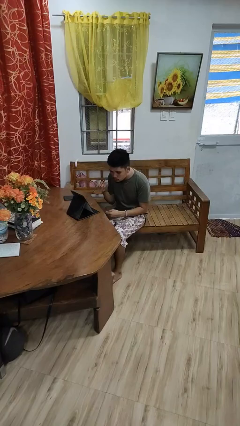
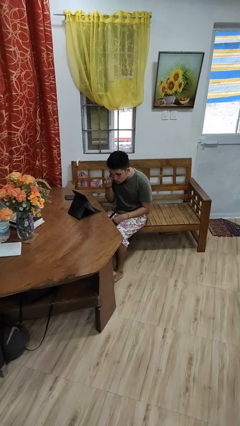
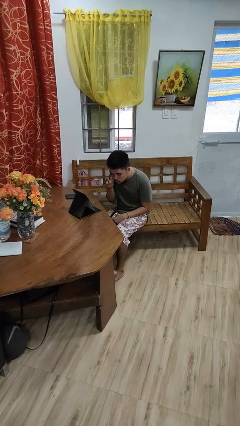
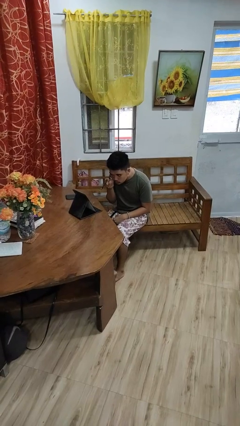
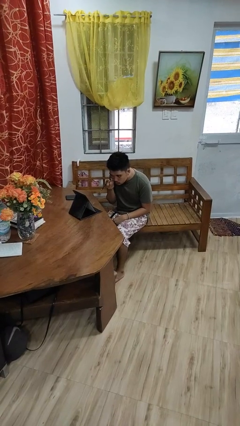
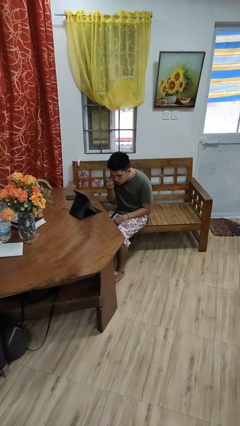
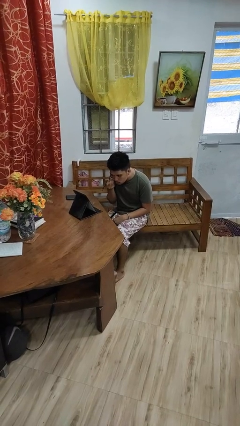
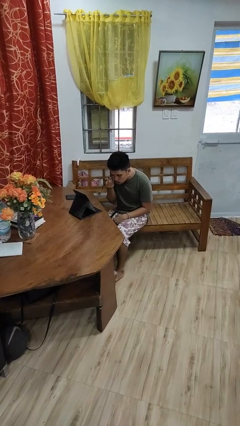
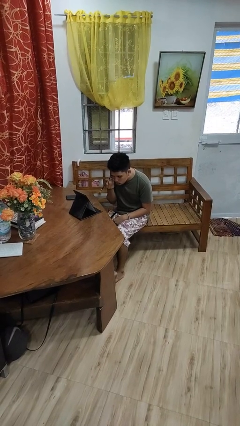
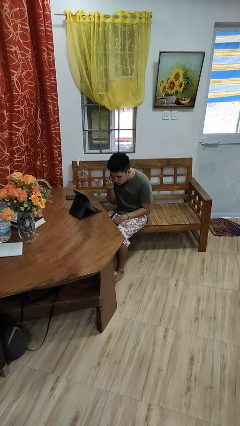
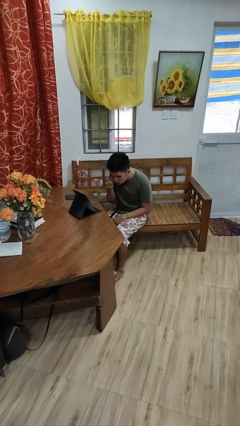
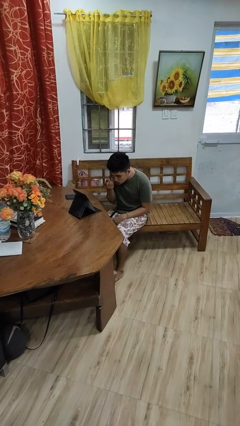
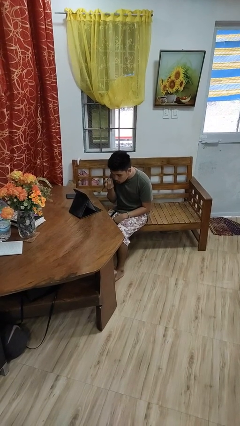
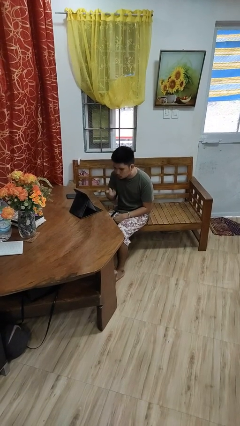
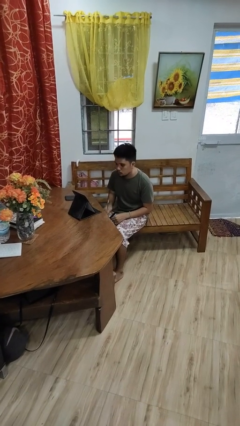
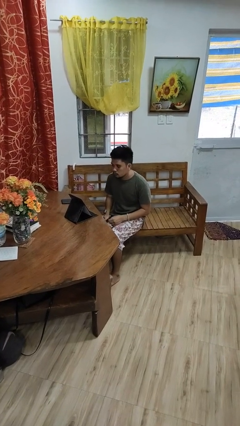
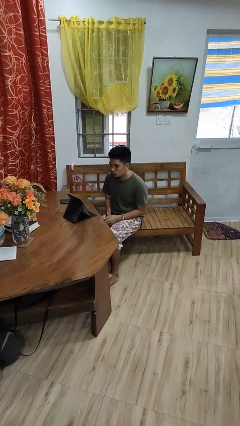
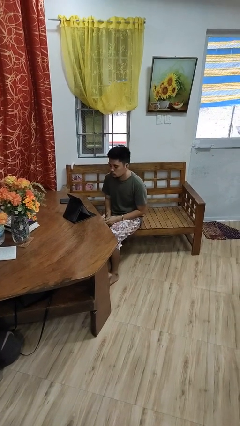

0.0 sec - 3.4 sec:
person applies eye makeup

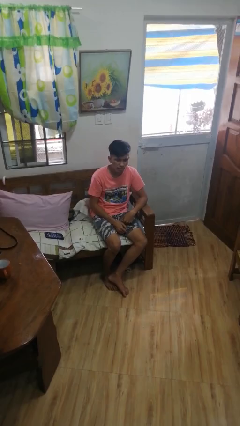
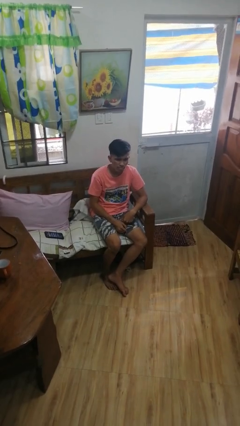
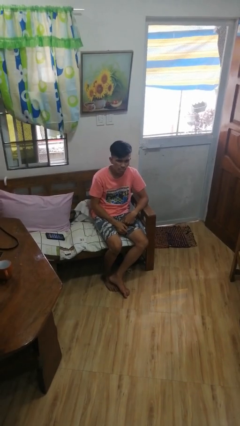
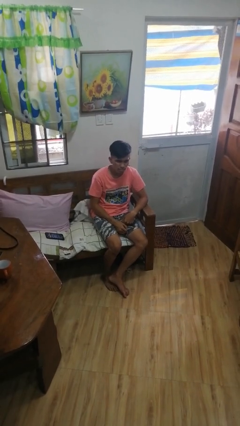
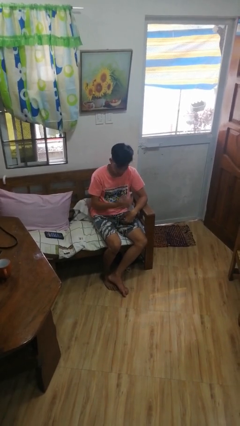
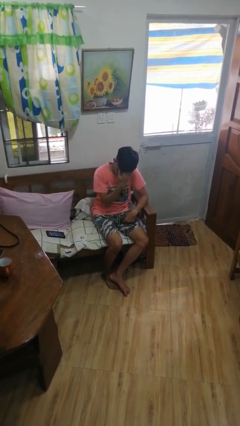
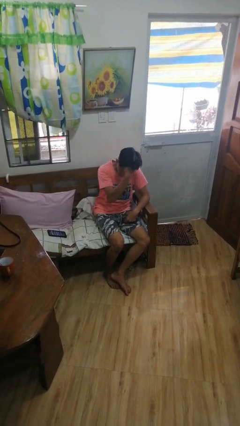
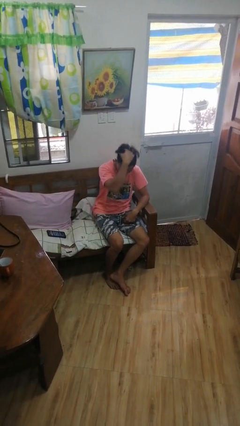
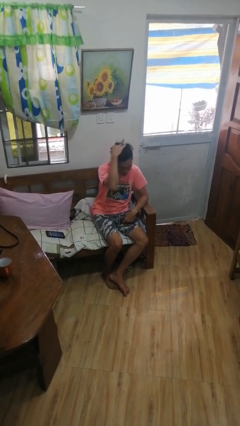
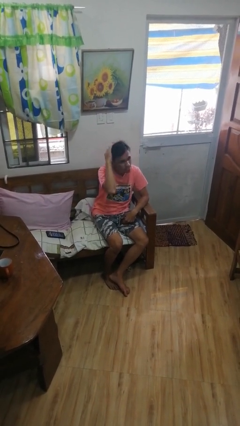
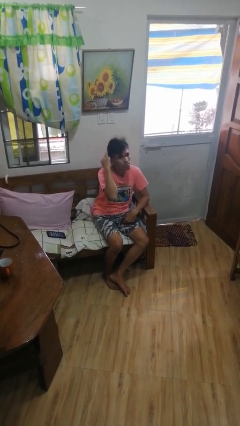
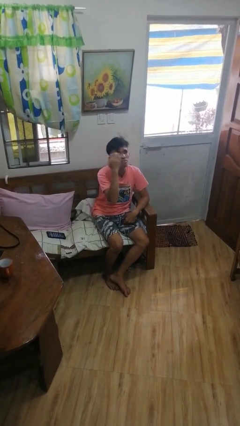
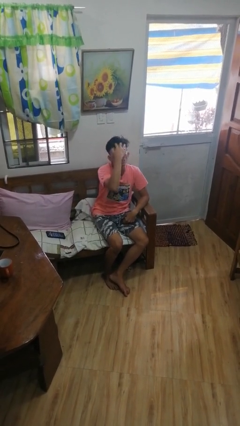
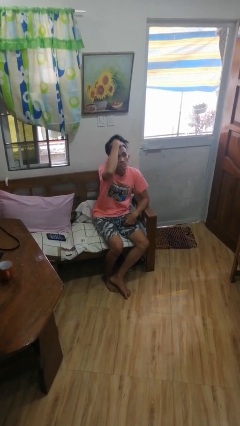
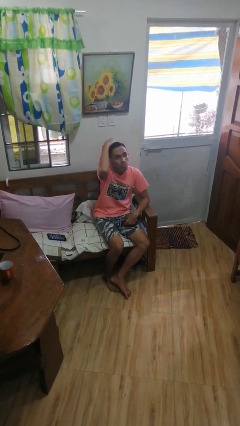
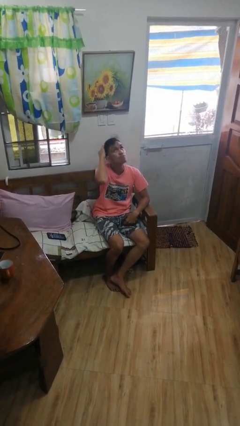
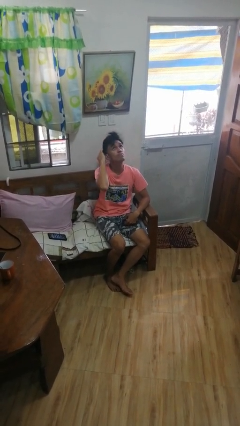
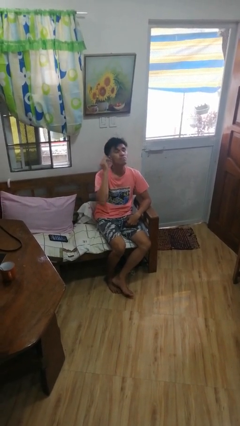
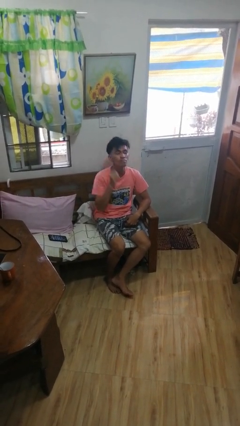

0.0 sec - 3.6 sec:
person strokes hair

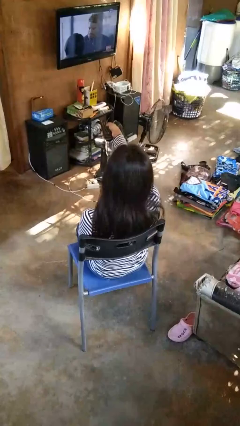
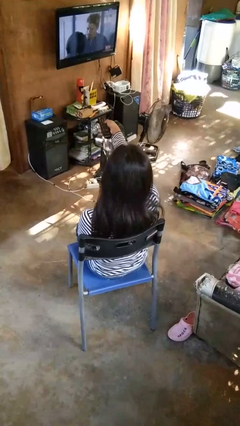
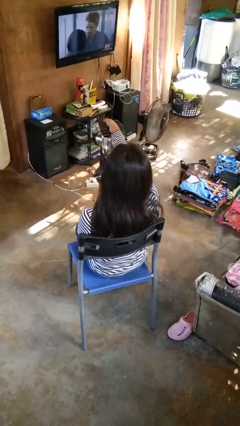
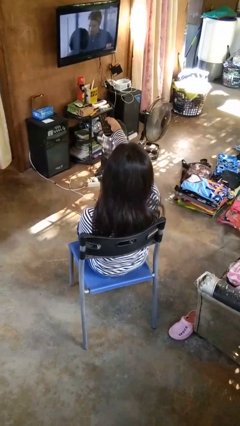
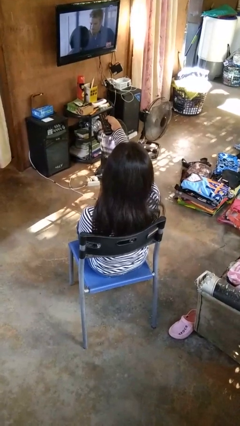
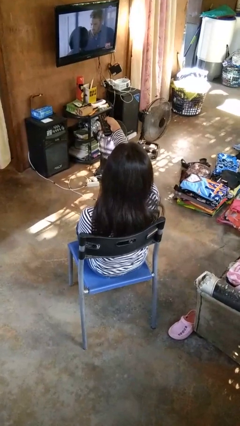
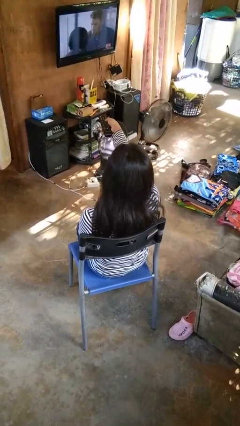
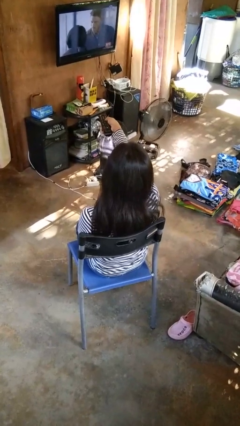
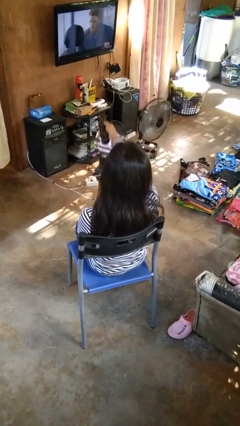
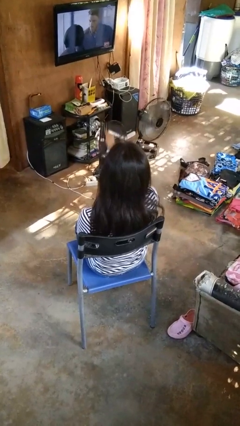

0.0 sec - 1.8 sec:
person uses television remote

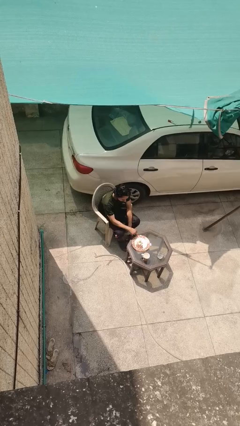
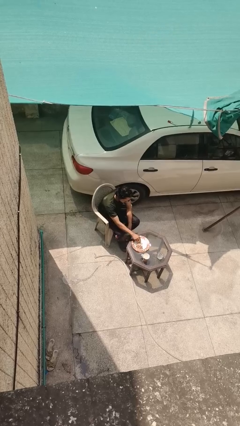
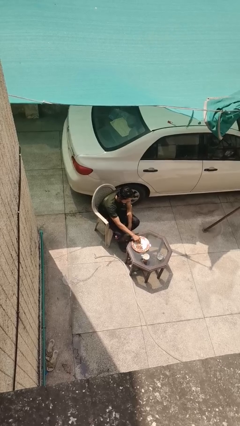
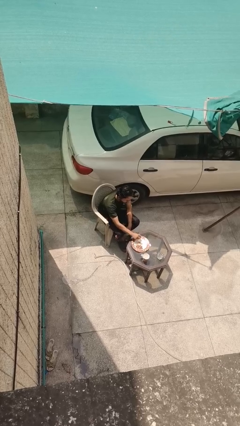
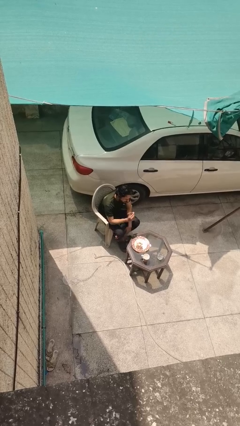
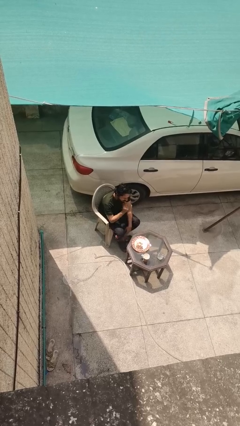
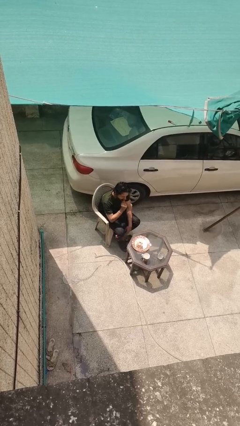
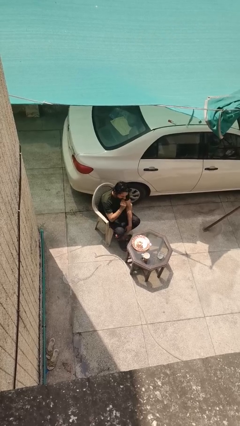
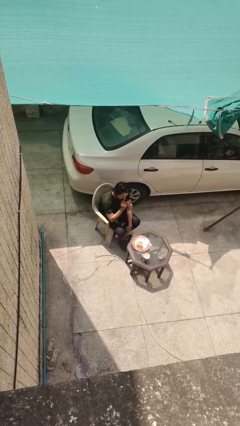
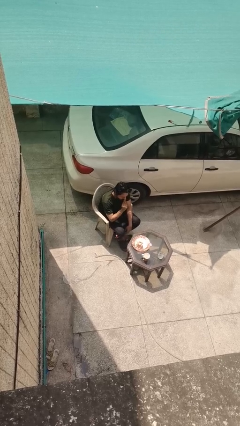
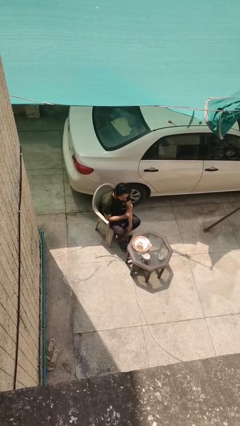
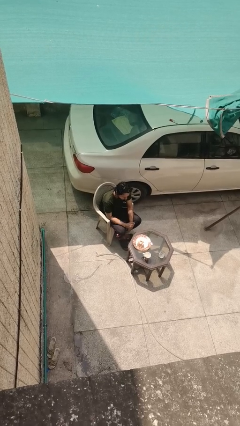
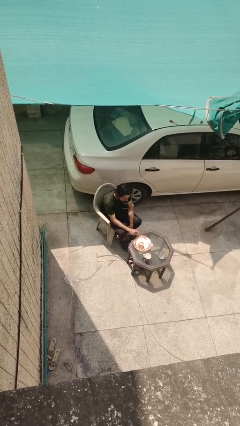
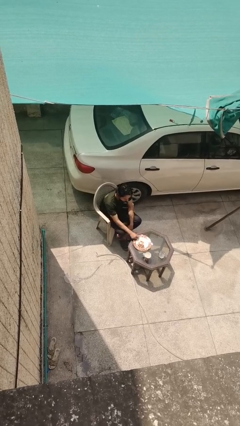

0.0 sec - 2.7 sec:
person eats with hands

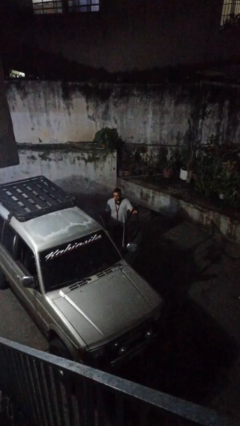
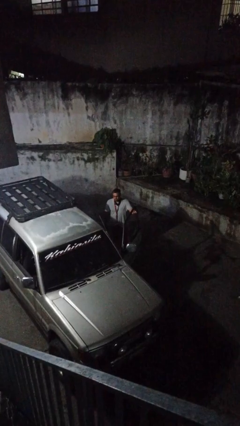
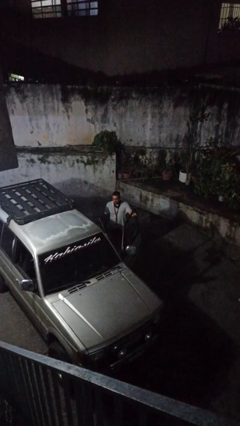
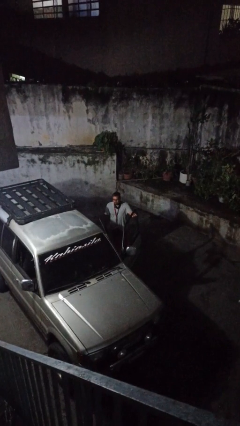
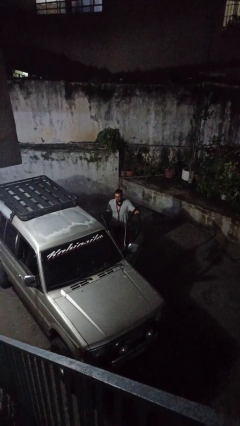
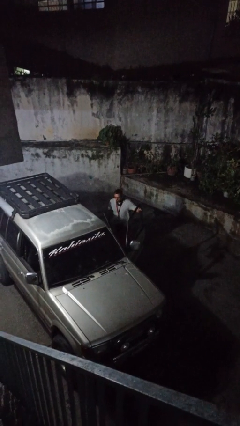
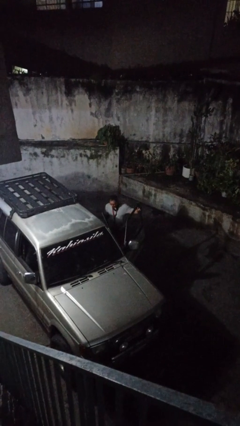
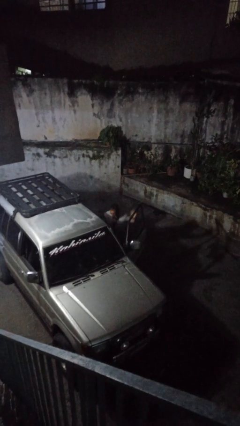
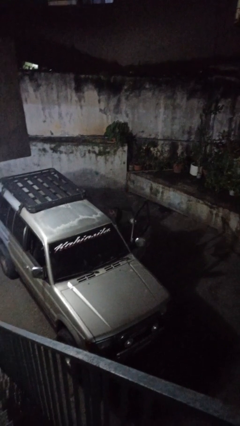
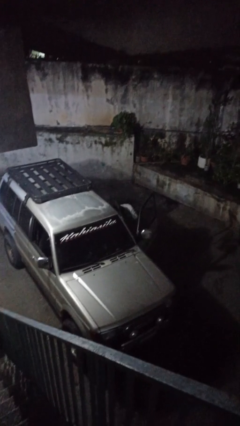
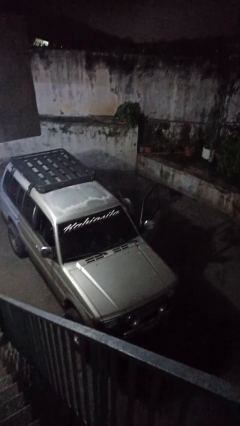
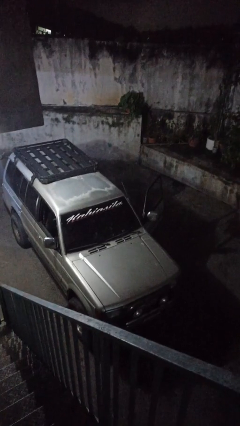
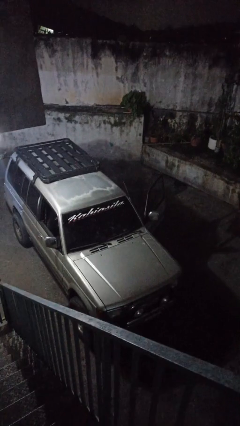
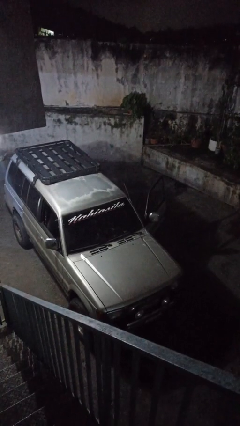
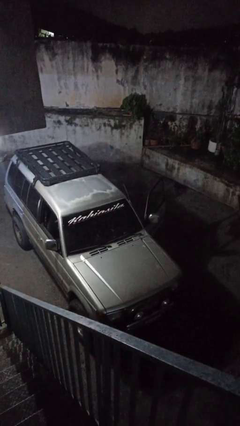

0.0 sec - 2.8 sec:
person enters car

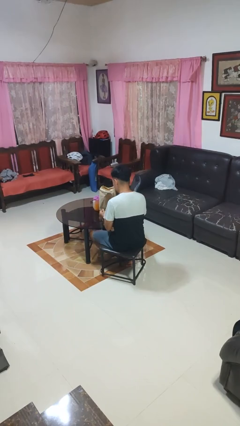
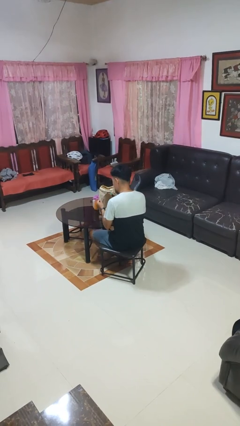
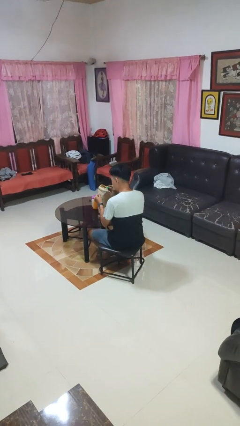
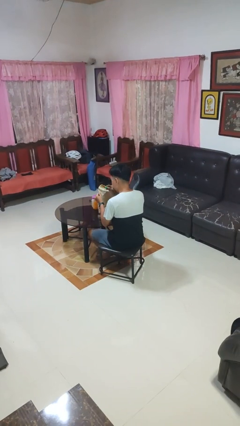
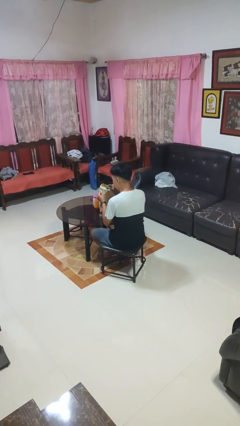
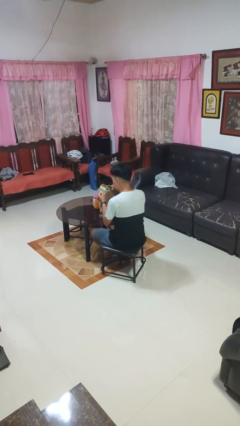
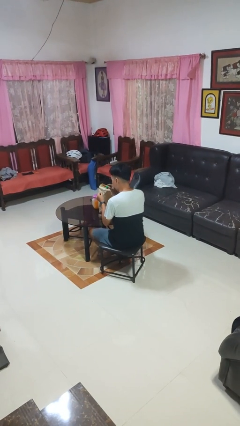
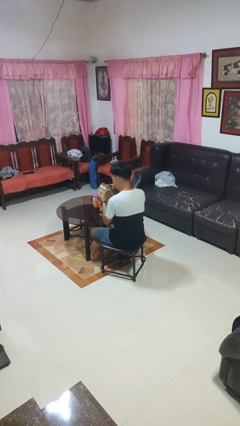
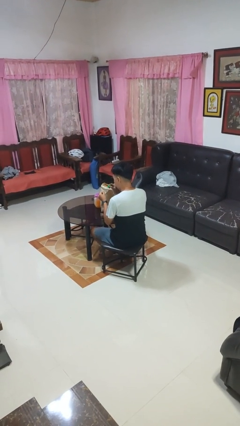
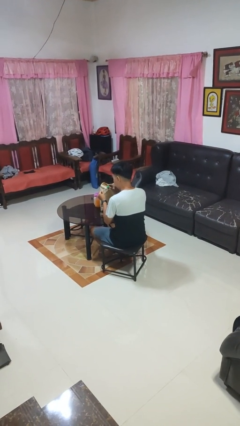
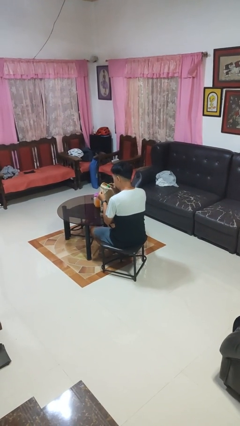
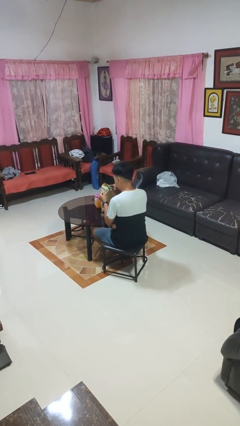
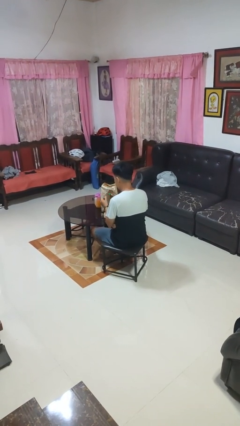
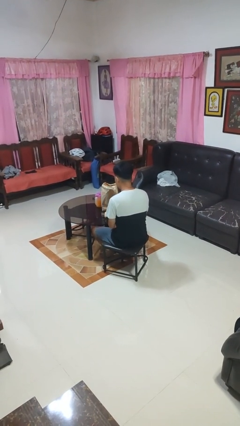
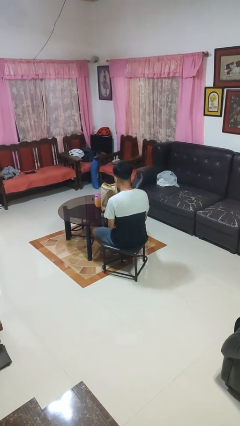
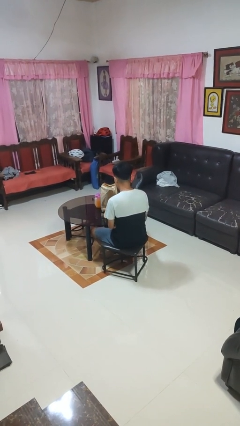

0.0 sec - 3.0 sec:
person paints fingernails

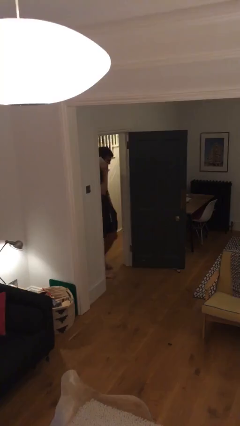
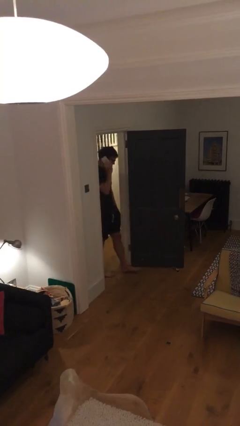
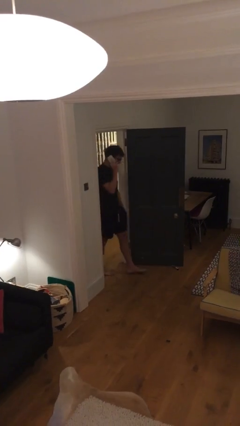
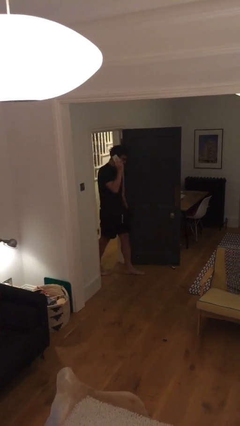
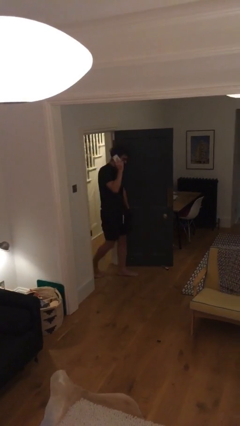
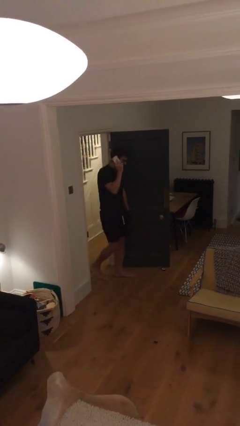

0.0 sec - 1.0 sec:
person enters scene through structure
